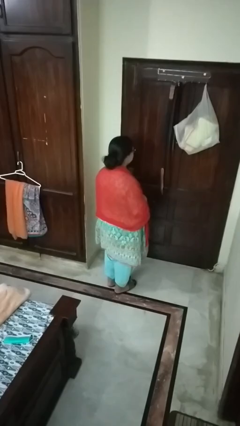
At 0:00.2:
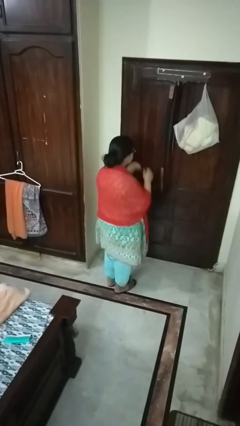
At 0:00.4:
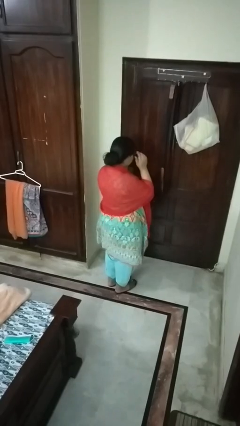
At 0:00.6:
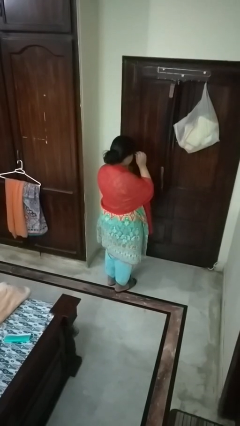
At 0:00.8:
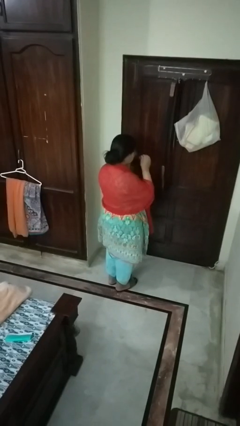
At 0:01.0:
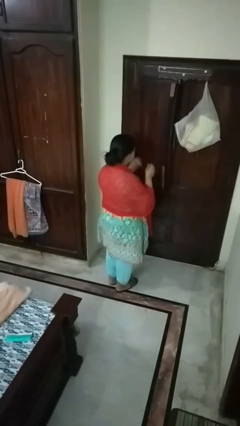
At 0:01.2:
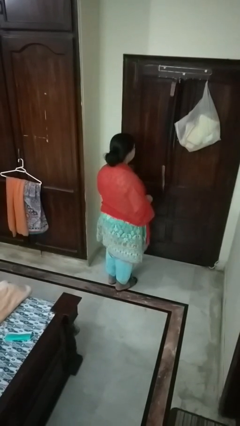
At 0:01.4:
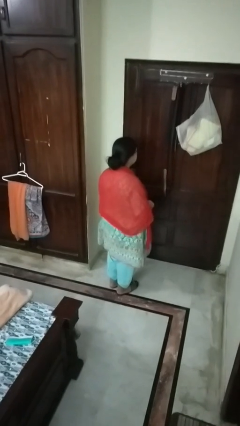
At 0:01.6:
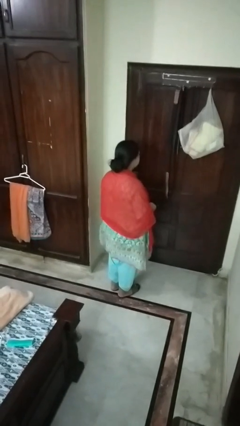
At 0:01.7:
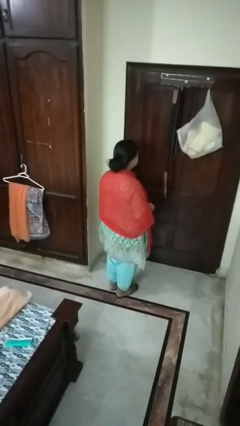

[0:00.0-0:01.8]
person takes off glasses

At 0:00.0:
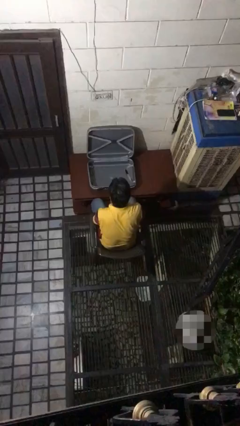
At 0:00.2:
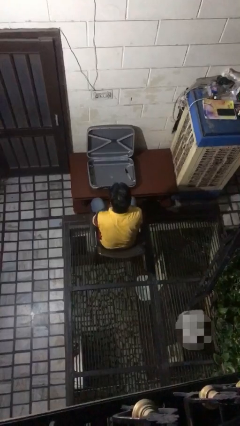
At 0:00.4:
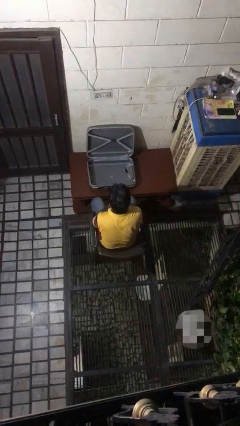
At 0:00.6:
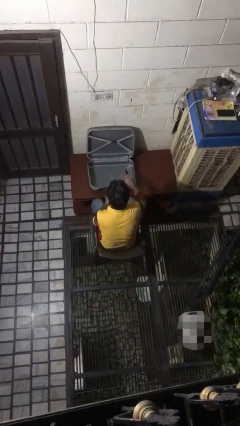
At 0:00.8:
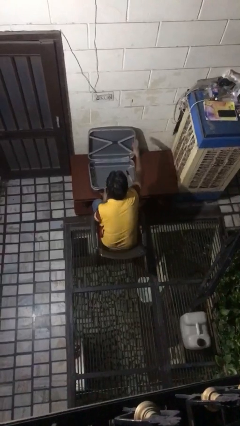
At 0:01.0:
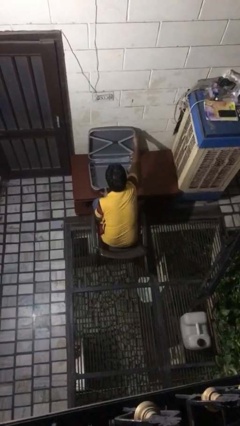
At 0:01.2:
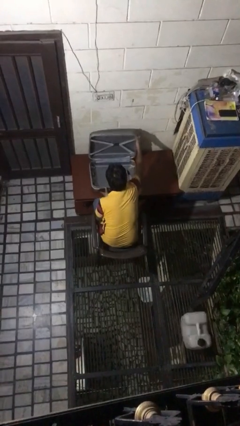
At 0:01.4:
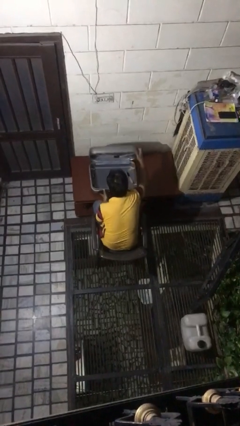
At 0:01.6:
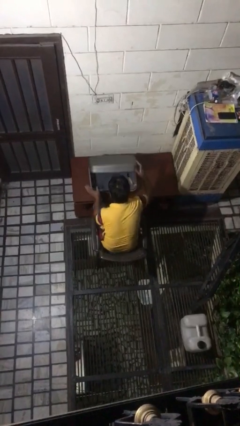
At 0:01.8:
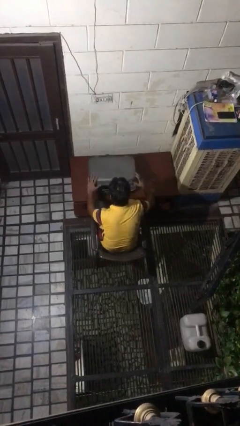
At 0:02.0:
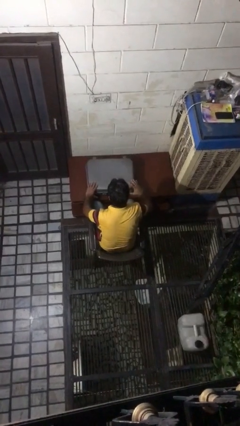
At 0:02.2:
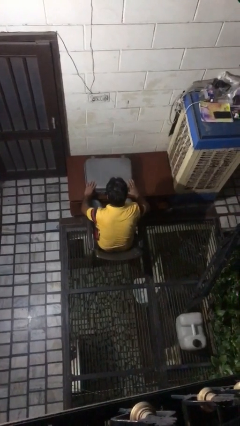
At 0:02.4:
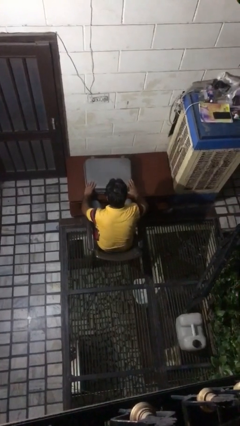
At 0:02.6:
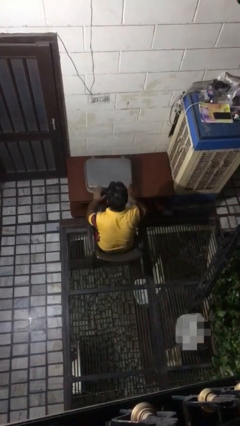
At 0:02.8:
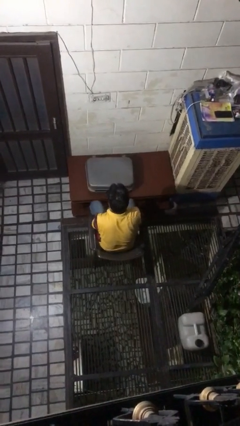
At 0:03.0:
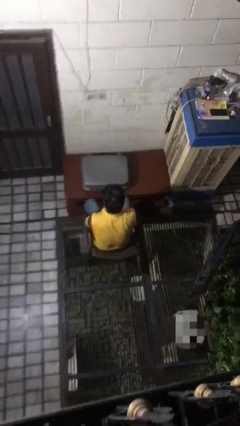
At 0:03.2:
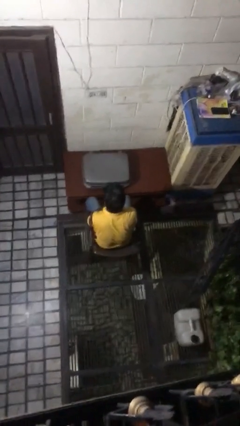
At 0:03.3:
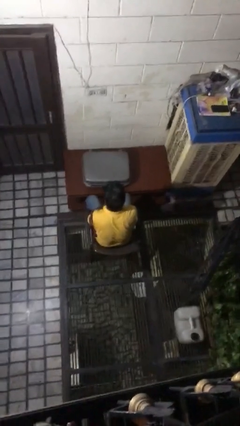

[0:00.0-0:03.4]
person closes suitcase

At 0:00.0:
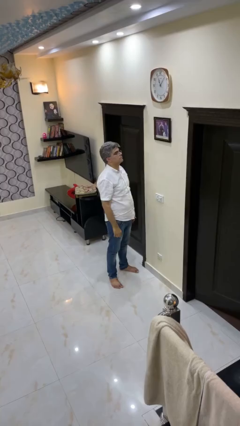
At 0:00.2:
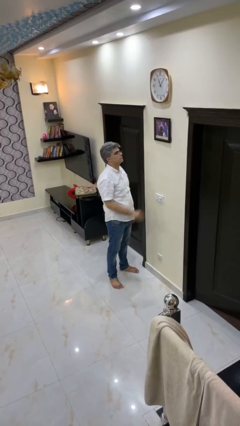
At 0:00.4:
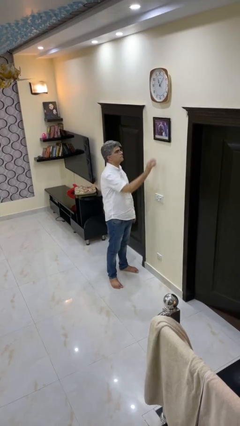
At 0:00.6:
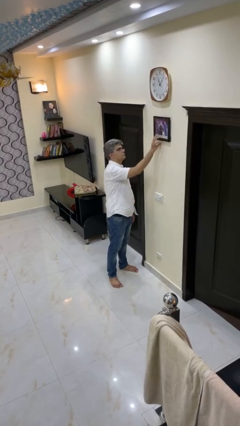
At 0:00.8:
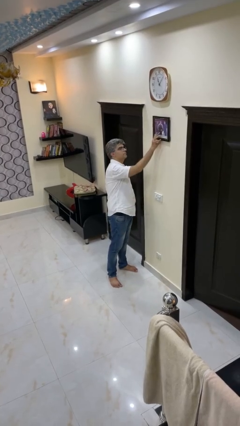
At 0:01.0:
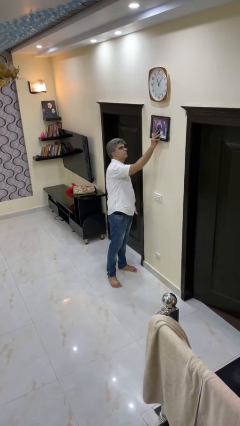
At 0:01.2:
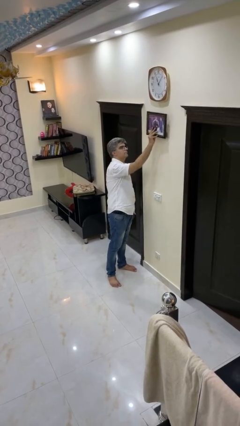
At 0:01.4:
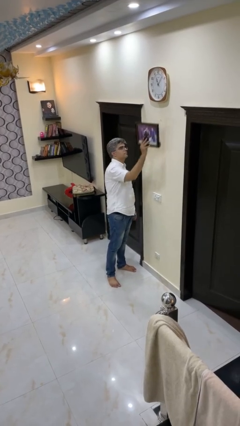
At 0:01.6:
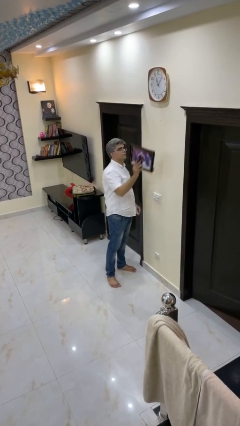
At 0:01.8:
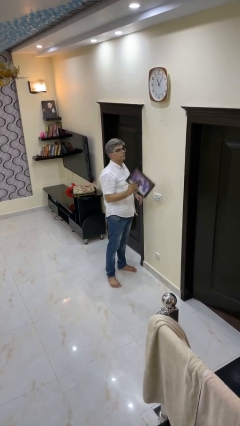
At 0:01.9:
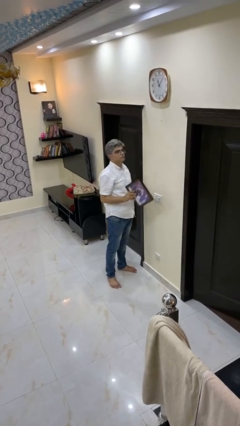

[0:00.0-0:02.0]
person takes down picture frame

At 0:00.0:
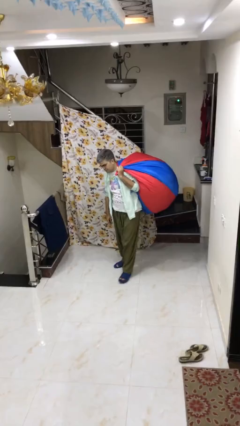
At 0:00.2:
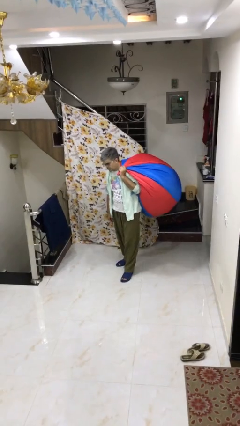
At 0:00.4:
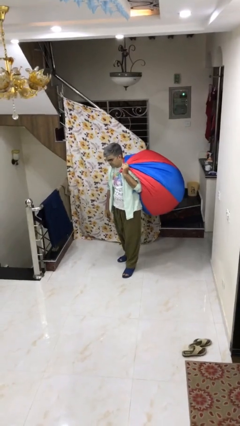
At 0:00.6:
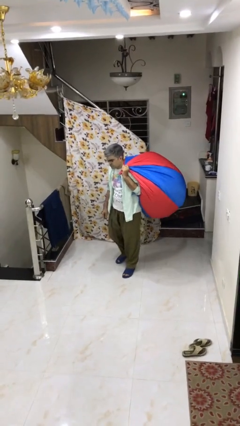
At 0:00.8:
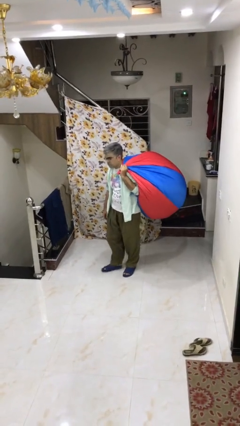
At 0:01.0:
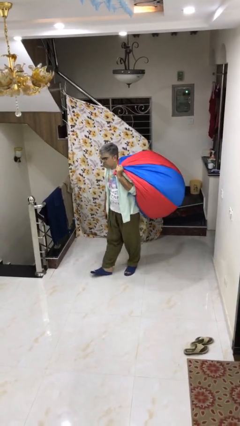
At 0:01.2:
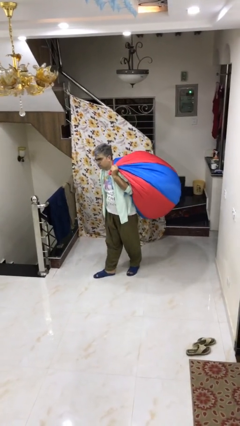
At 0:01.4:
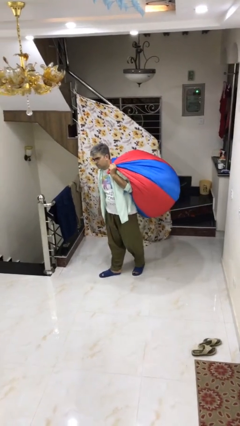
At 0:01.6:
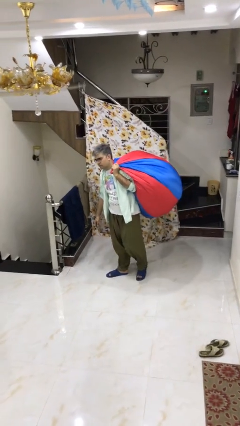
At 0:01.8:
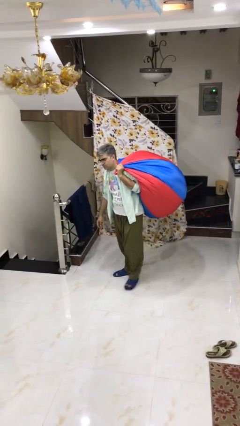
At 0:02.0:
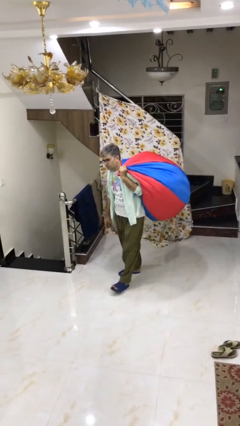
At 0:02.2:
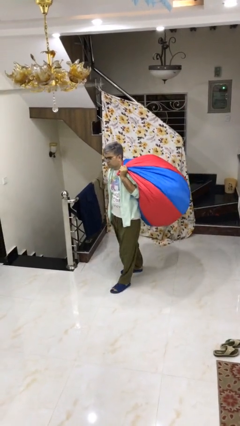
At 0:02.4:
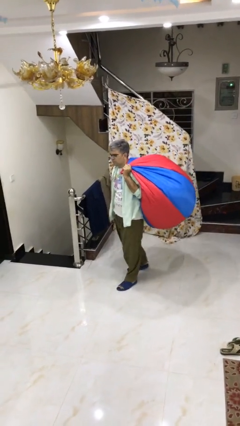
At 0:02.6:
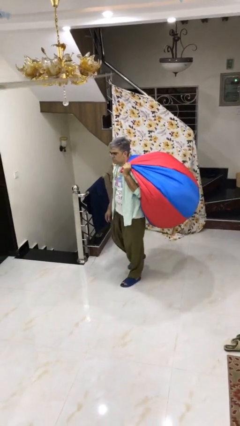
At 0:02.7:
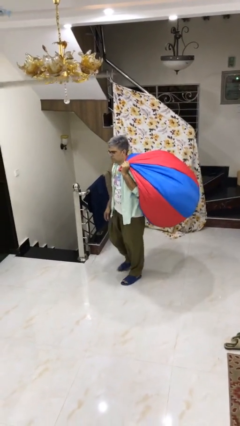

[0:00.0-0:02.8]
person carries heavy object

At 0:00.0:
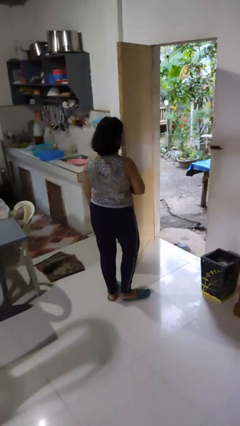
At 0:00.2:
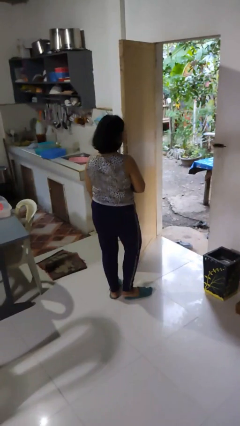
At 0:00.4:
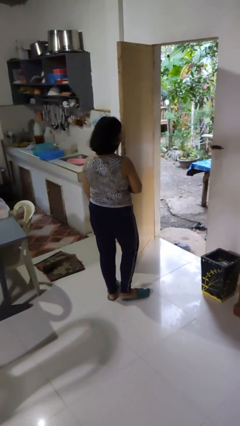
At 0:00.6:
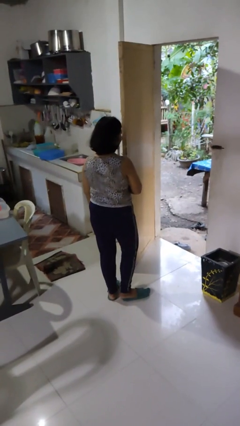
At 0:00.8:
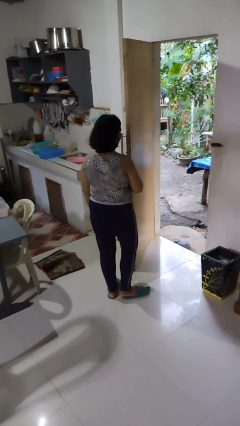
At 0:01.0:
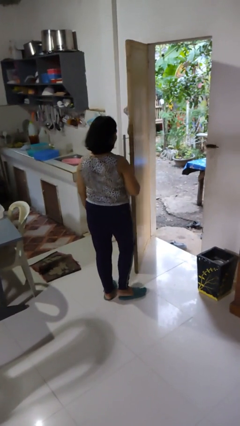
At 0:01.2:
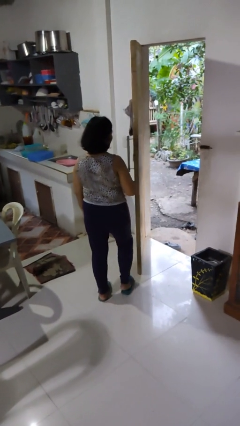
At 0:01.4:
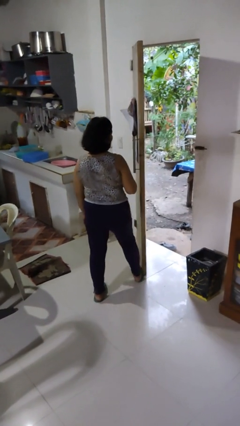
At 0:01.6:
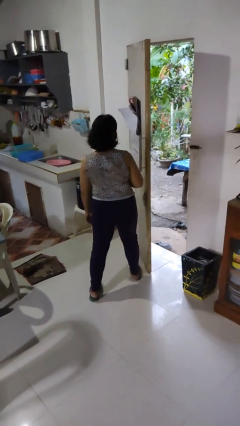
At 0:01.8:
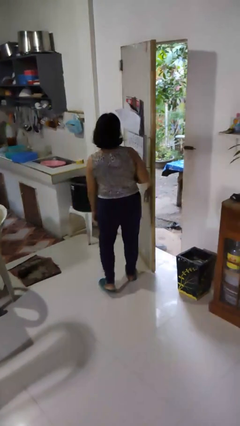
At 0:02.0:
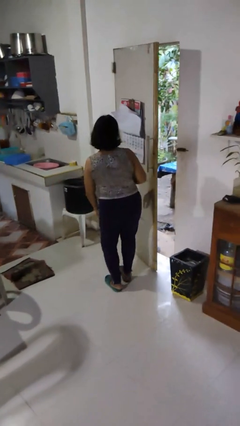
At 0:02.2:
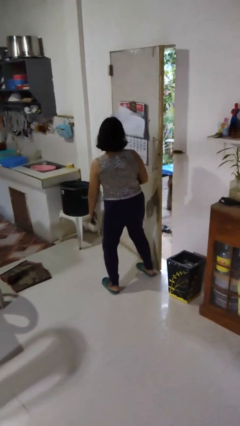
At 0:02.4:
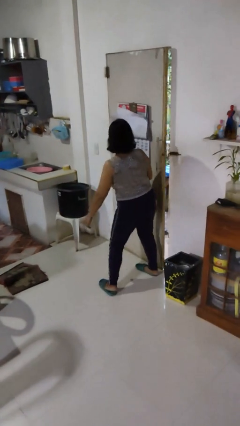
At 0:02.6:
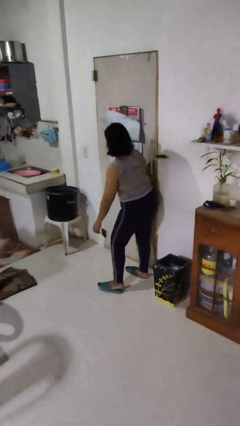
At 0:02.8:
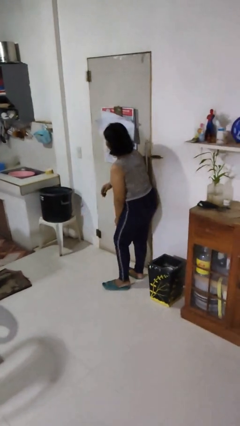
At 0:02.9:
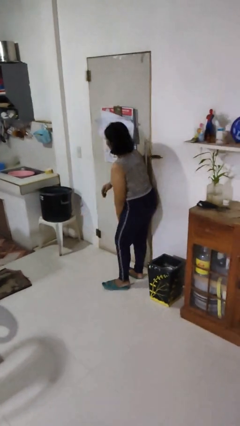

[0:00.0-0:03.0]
person closes door with hip

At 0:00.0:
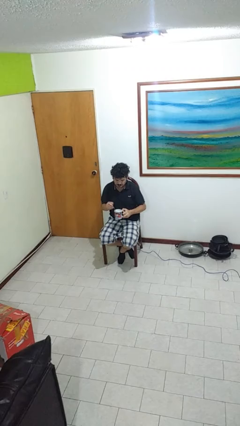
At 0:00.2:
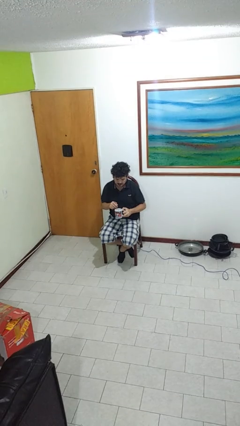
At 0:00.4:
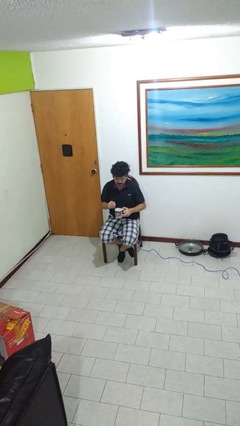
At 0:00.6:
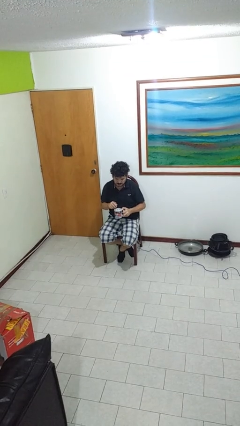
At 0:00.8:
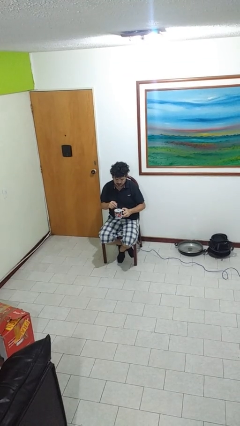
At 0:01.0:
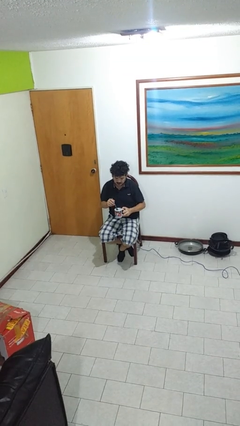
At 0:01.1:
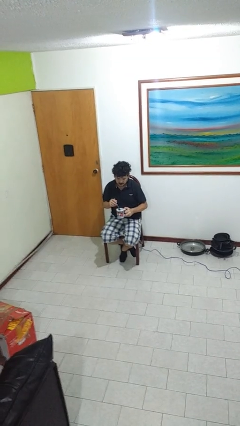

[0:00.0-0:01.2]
person stirs mug

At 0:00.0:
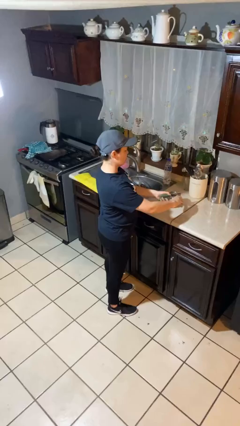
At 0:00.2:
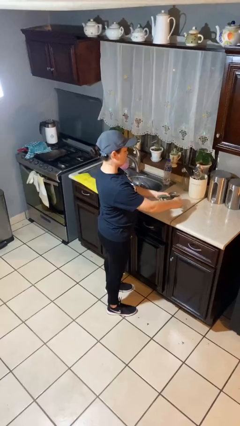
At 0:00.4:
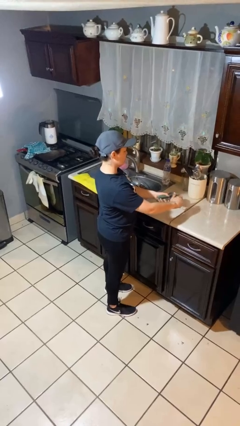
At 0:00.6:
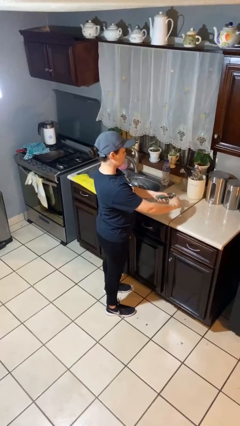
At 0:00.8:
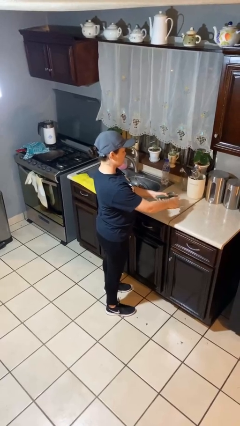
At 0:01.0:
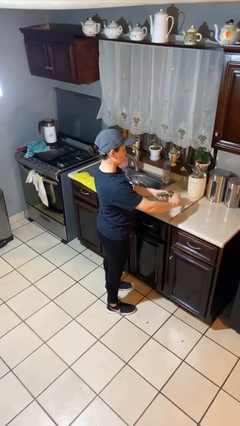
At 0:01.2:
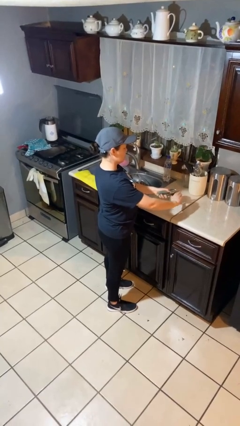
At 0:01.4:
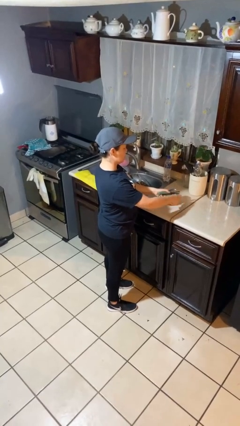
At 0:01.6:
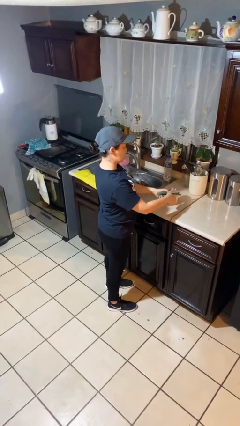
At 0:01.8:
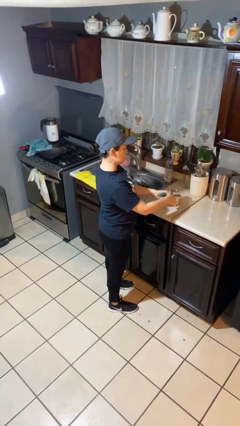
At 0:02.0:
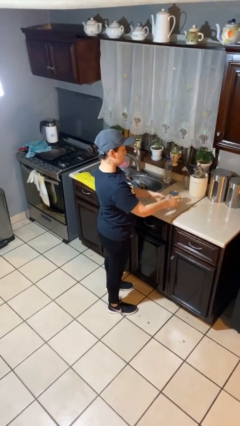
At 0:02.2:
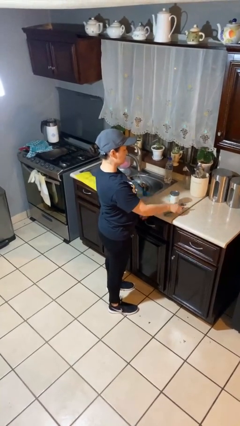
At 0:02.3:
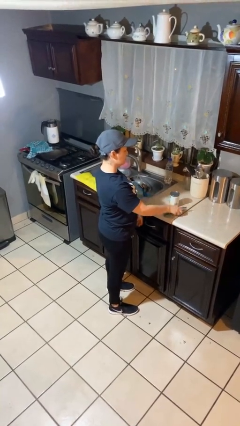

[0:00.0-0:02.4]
person opens can with can opener

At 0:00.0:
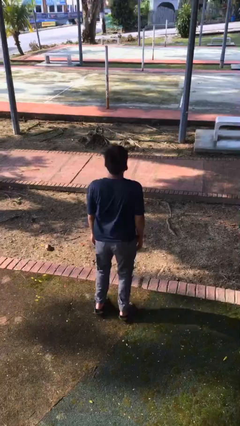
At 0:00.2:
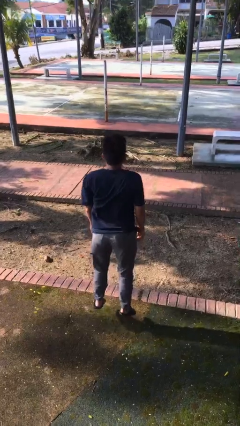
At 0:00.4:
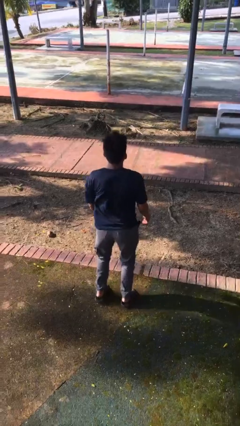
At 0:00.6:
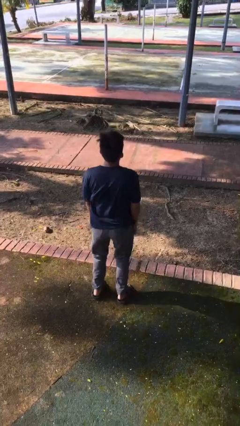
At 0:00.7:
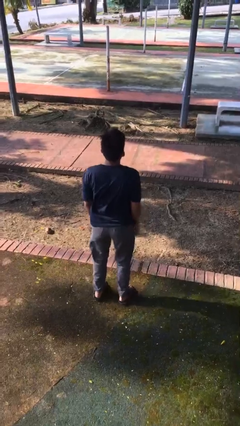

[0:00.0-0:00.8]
person jumps
